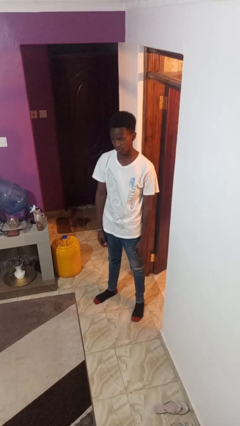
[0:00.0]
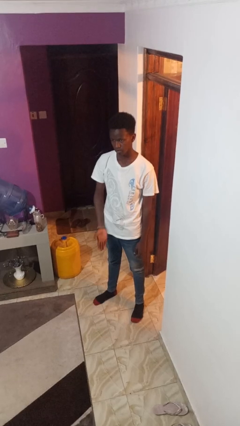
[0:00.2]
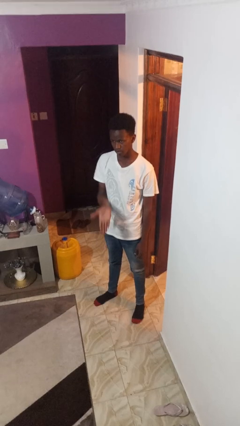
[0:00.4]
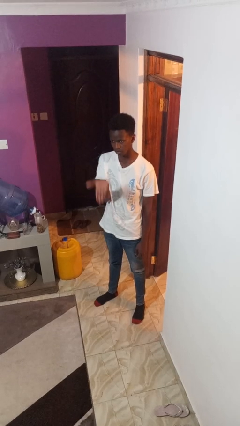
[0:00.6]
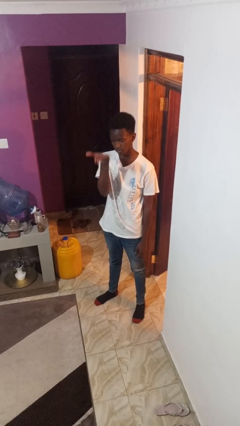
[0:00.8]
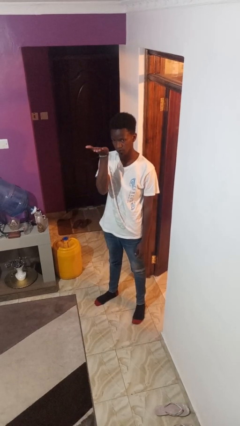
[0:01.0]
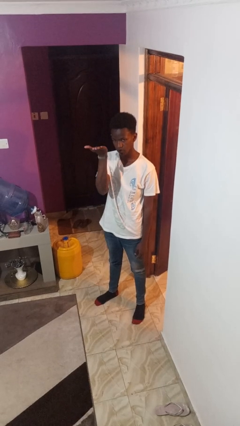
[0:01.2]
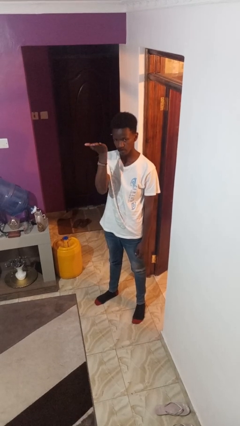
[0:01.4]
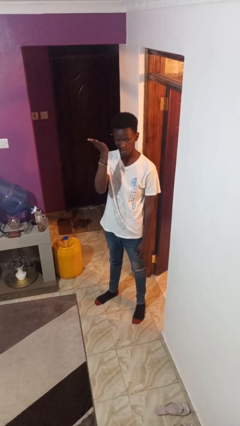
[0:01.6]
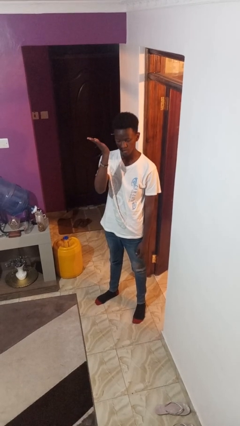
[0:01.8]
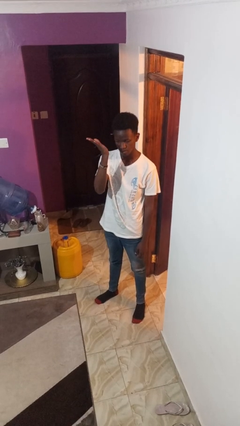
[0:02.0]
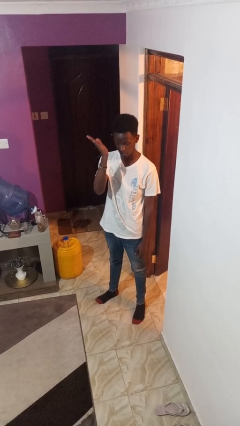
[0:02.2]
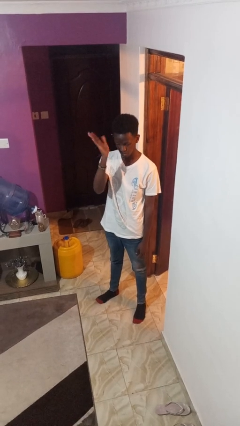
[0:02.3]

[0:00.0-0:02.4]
person gestures swipe up

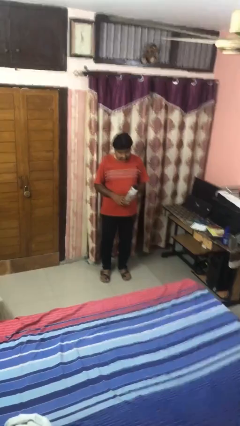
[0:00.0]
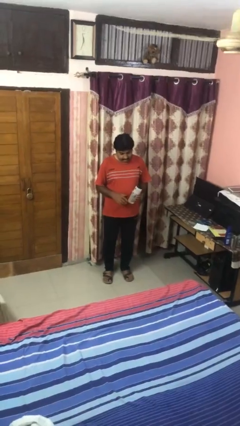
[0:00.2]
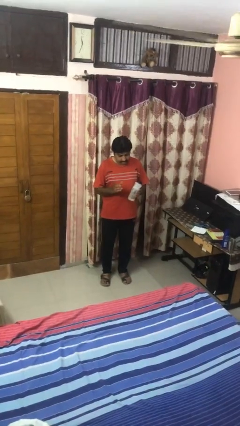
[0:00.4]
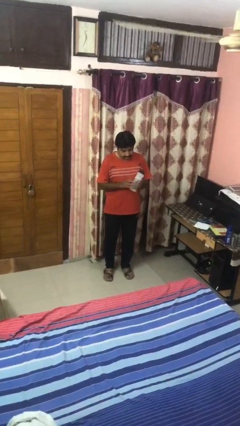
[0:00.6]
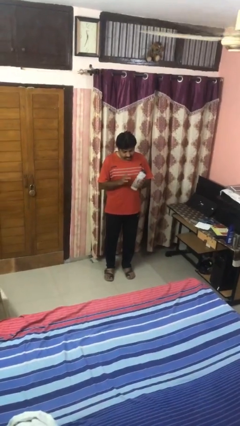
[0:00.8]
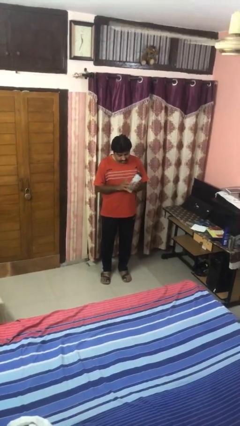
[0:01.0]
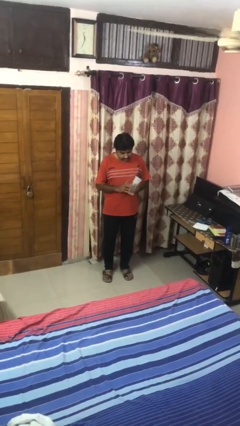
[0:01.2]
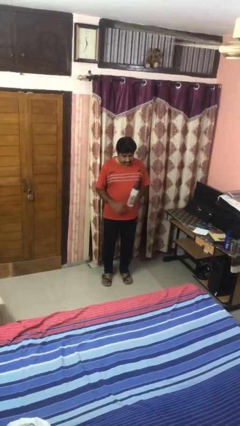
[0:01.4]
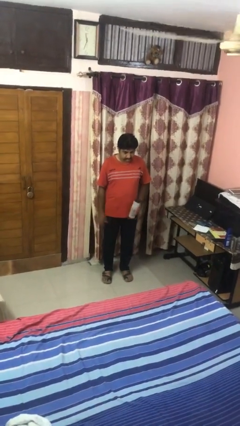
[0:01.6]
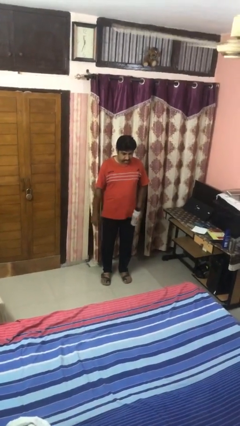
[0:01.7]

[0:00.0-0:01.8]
person taps object with finger

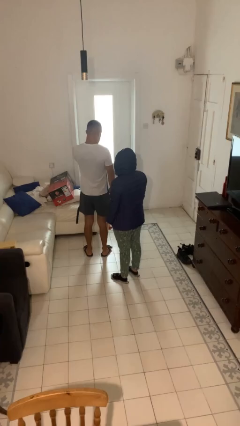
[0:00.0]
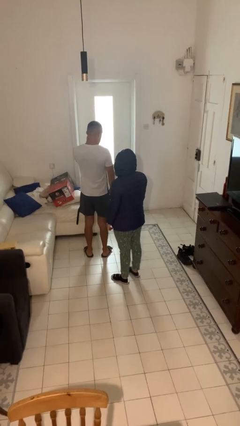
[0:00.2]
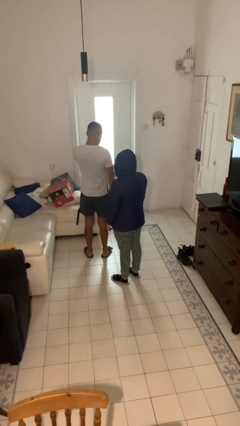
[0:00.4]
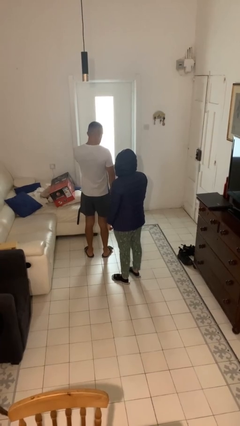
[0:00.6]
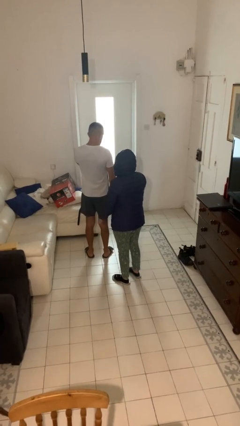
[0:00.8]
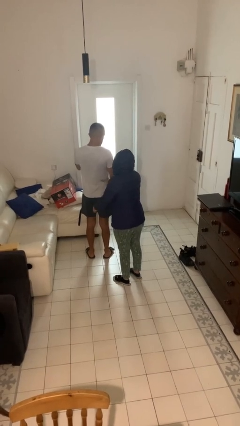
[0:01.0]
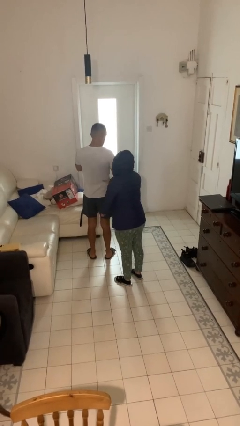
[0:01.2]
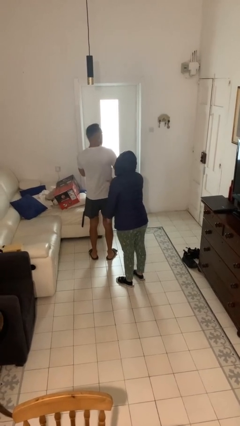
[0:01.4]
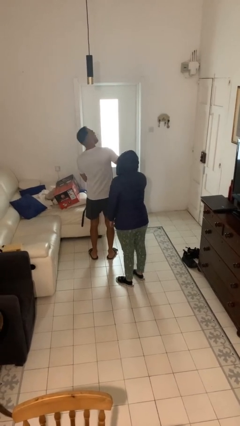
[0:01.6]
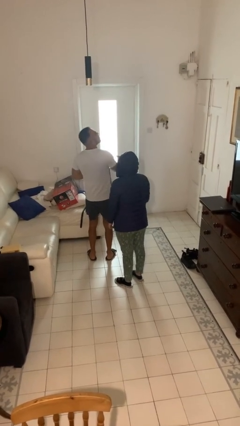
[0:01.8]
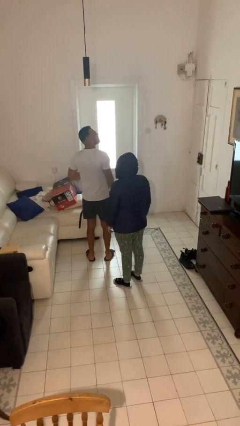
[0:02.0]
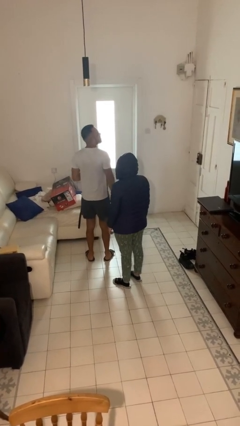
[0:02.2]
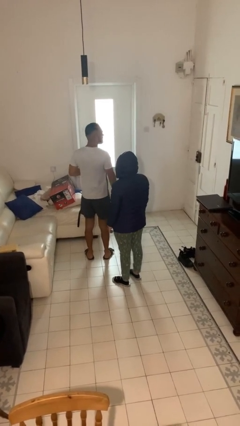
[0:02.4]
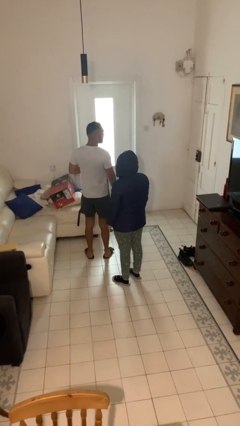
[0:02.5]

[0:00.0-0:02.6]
person tickles person

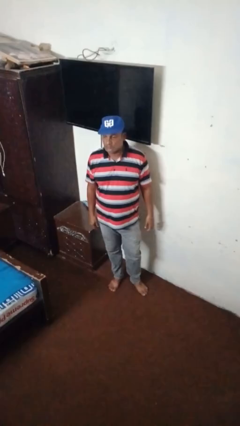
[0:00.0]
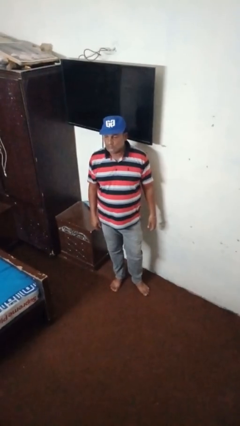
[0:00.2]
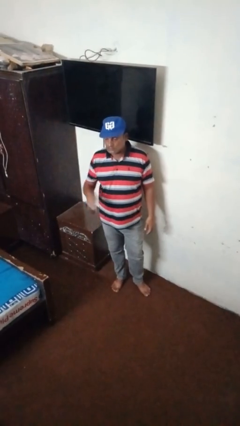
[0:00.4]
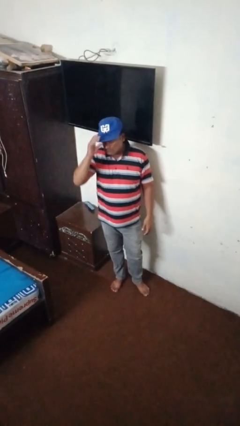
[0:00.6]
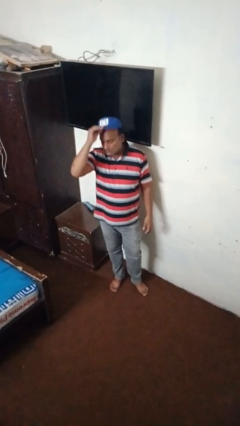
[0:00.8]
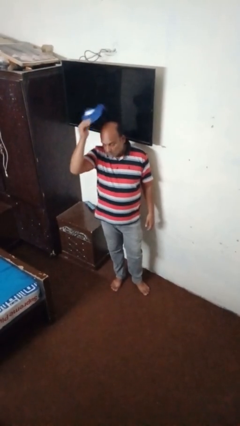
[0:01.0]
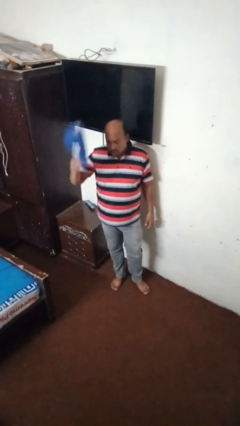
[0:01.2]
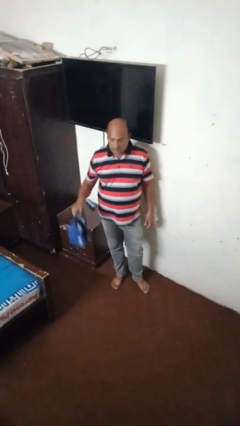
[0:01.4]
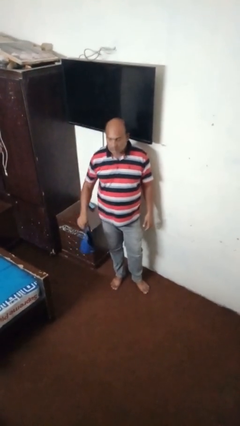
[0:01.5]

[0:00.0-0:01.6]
person takes off hat

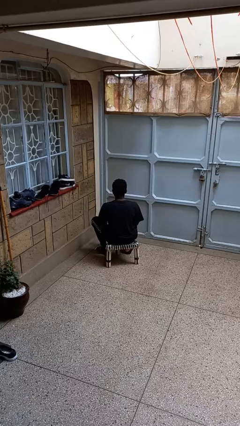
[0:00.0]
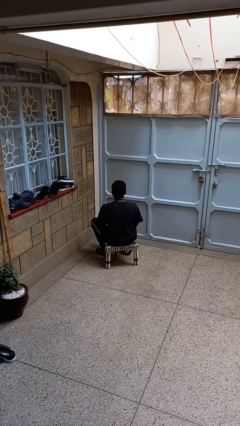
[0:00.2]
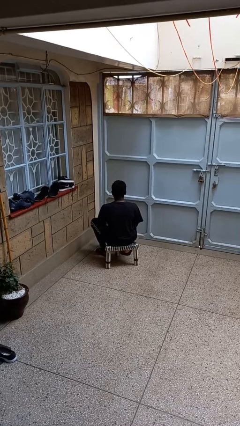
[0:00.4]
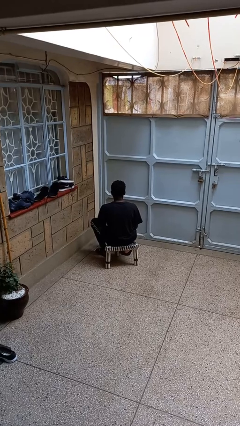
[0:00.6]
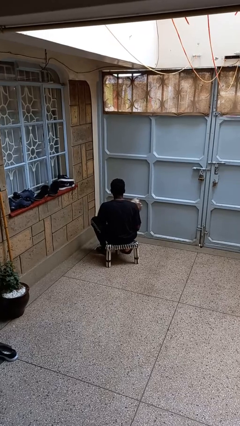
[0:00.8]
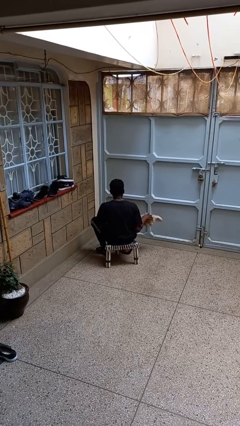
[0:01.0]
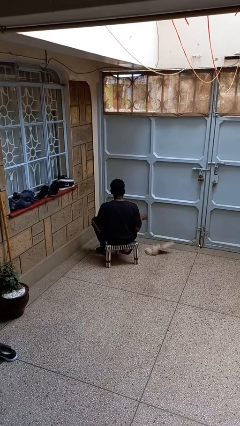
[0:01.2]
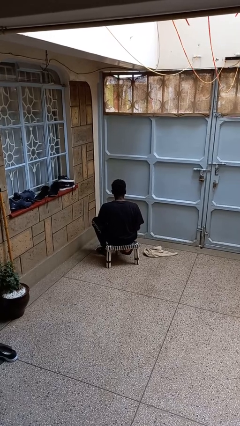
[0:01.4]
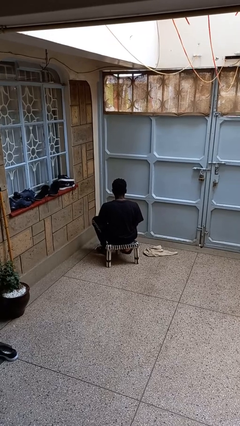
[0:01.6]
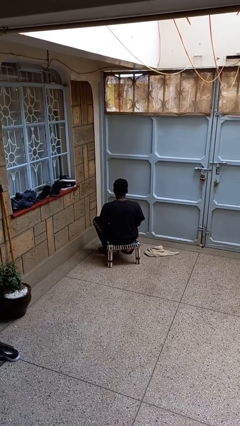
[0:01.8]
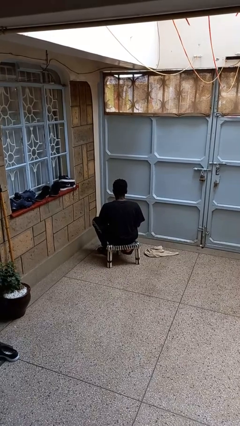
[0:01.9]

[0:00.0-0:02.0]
person throws object to ground

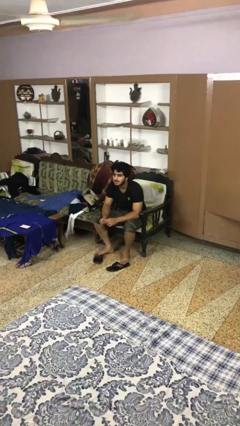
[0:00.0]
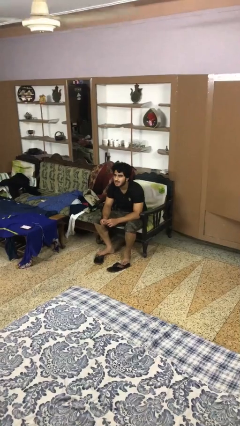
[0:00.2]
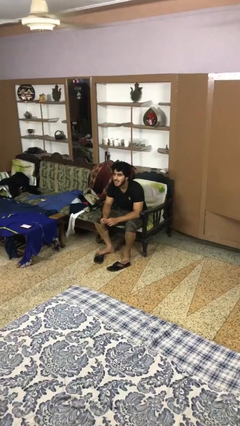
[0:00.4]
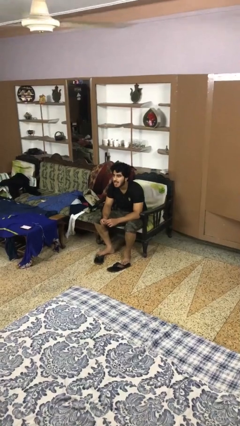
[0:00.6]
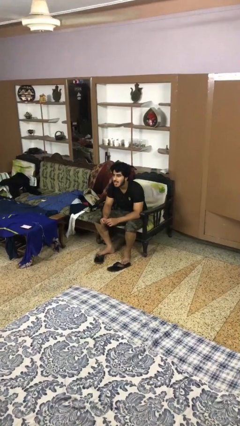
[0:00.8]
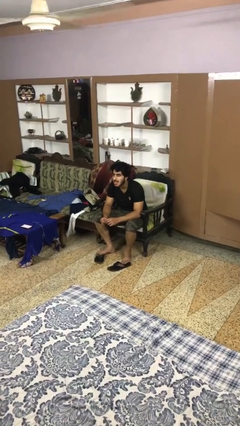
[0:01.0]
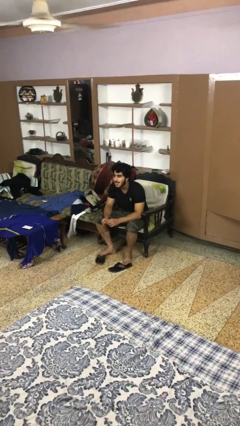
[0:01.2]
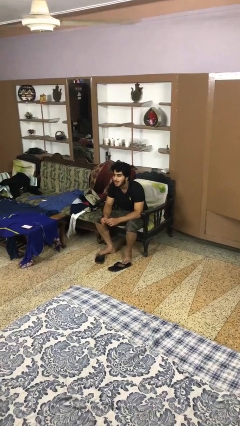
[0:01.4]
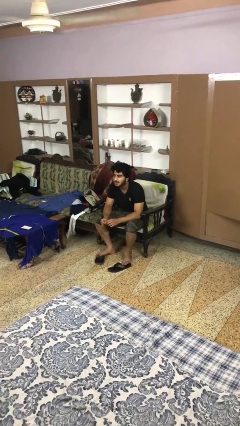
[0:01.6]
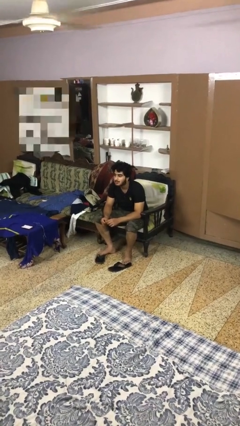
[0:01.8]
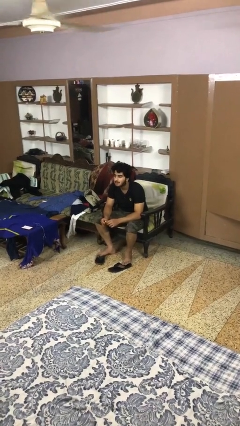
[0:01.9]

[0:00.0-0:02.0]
person sticks out tongue

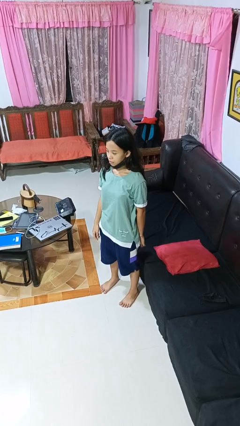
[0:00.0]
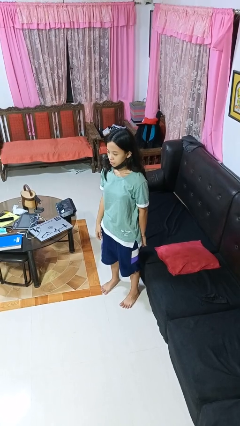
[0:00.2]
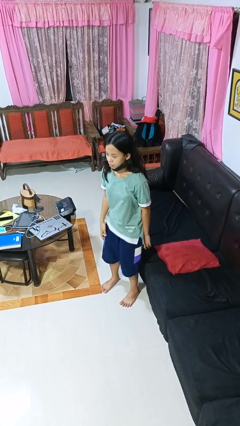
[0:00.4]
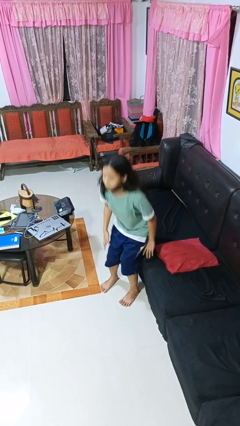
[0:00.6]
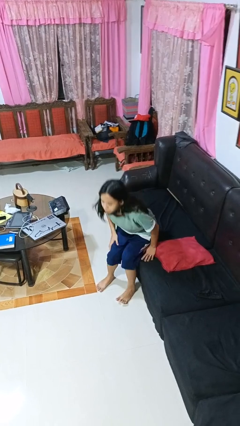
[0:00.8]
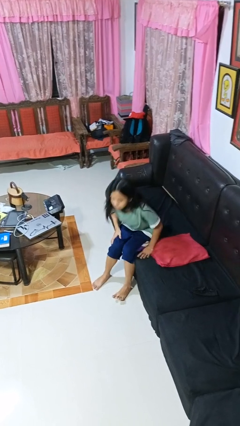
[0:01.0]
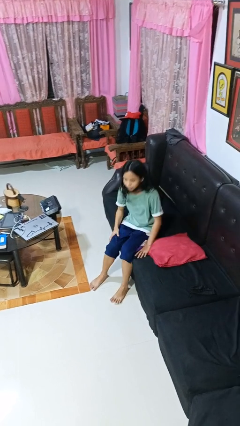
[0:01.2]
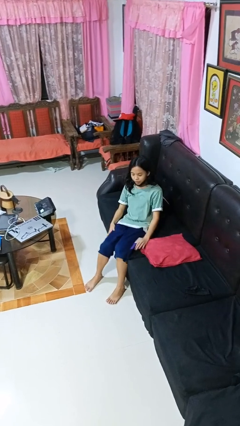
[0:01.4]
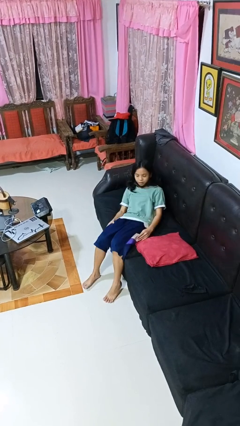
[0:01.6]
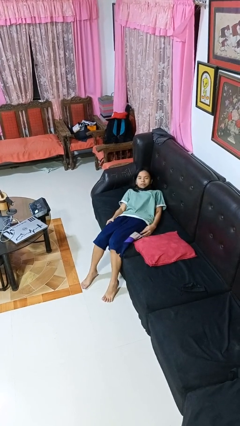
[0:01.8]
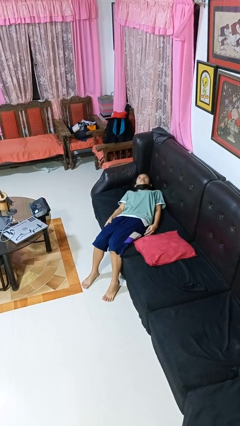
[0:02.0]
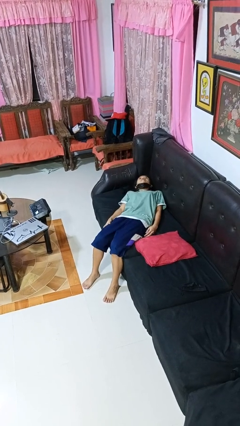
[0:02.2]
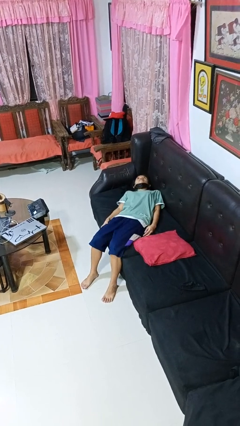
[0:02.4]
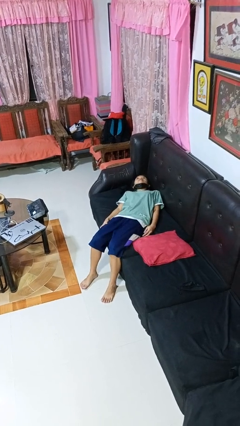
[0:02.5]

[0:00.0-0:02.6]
person lies down on couch

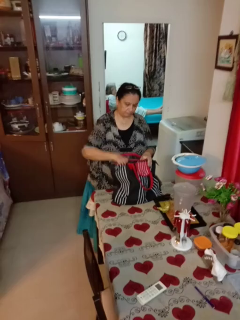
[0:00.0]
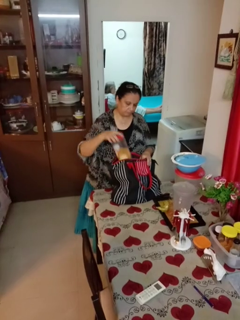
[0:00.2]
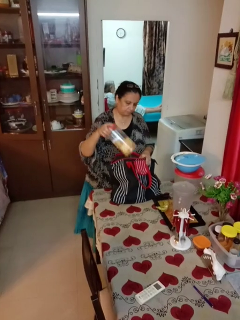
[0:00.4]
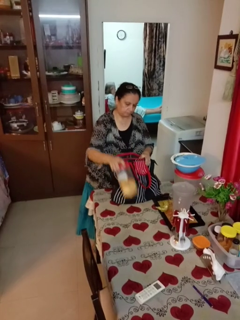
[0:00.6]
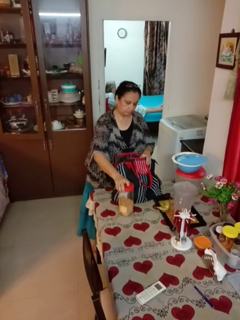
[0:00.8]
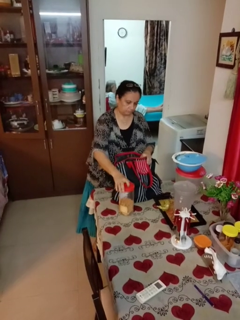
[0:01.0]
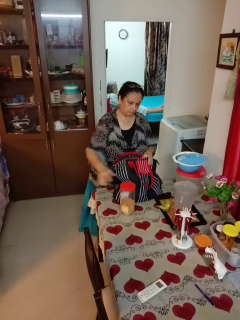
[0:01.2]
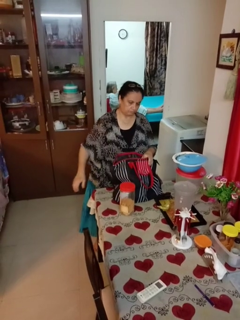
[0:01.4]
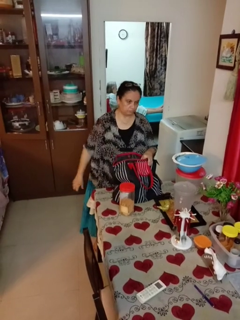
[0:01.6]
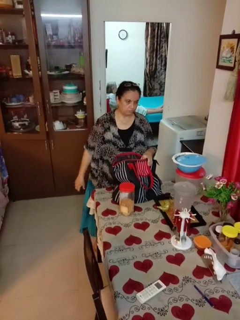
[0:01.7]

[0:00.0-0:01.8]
person takes object from bag

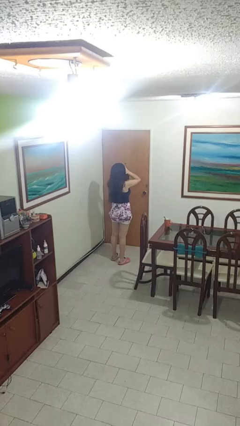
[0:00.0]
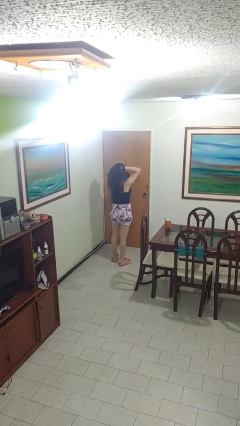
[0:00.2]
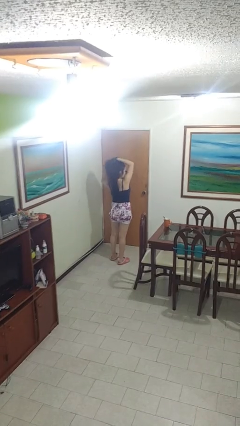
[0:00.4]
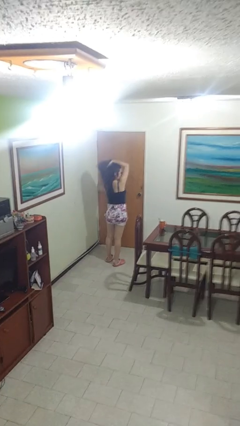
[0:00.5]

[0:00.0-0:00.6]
person strokes hair

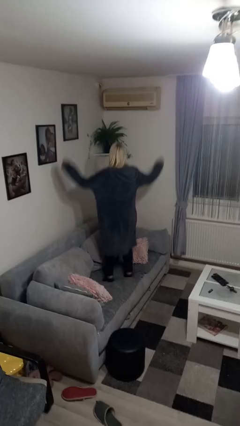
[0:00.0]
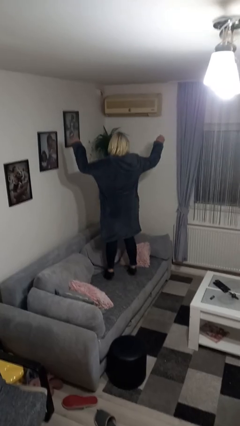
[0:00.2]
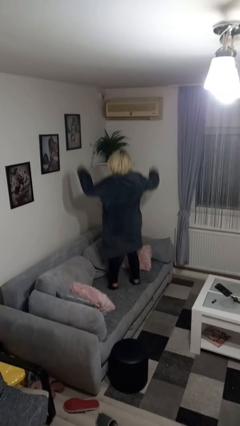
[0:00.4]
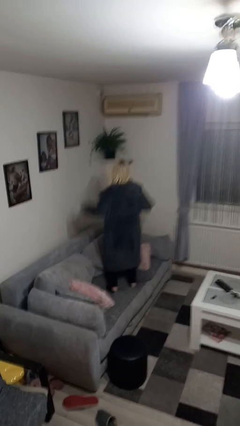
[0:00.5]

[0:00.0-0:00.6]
person jumps on couch
